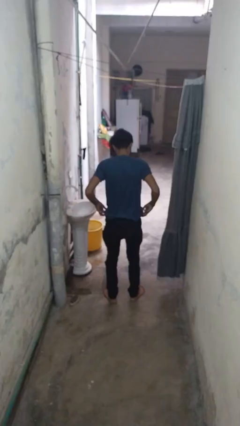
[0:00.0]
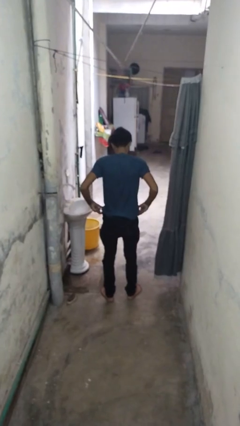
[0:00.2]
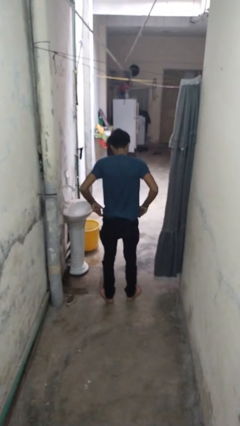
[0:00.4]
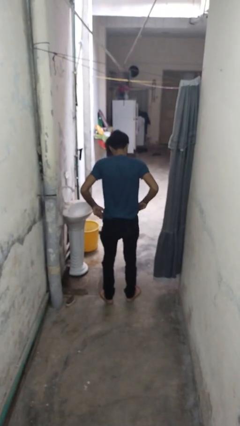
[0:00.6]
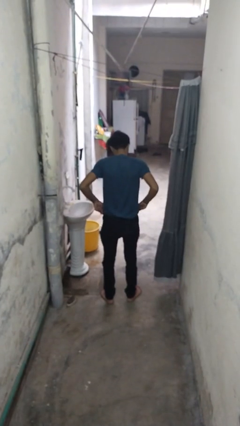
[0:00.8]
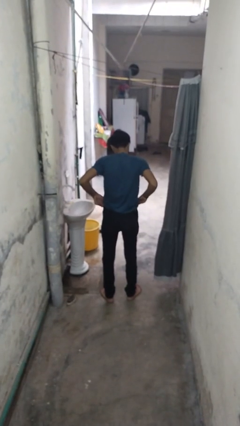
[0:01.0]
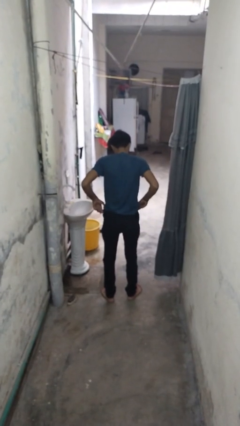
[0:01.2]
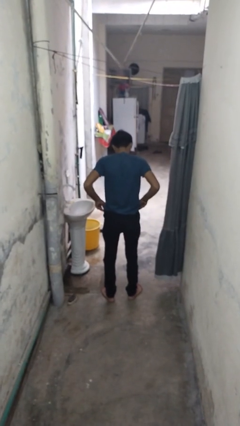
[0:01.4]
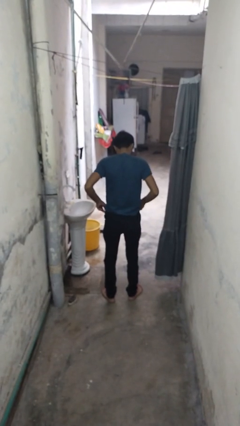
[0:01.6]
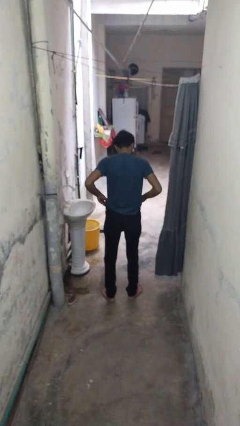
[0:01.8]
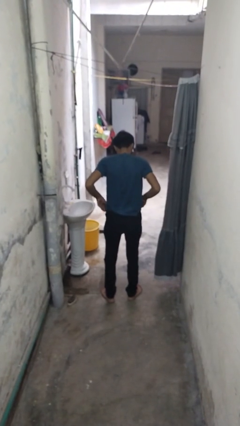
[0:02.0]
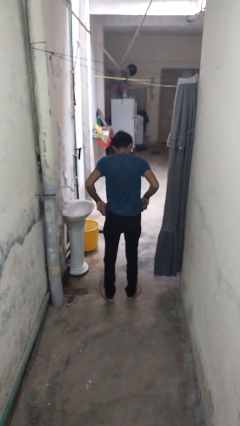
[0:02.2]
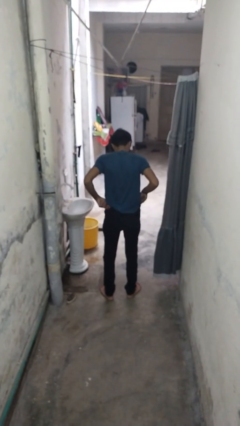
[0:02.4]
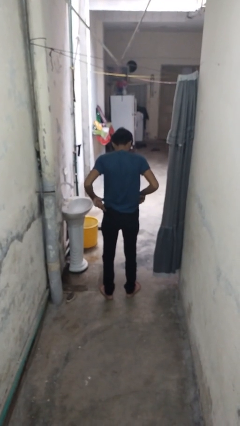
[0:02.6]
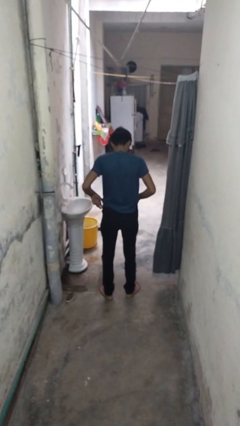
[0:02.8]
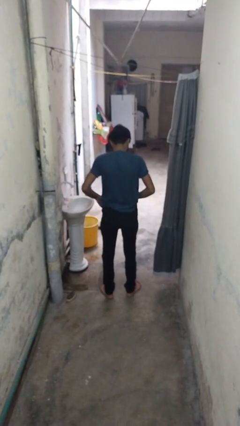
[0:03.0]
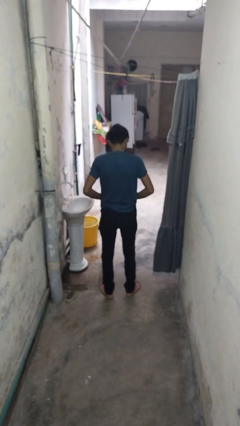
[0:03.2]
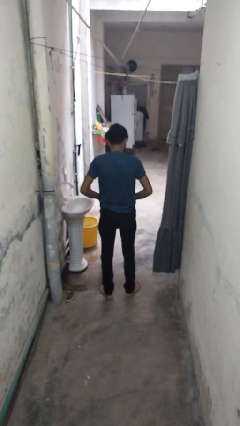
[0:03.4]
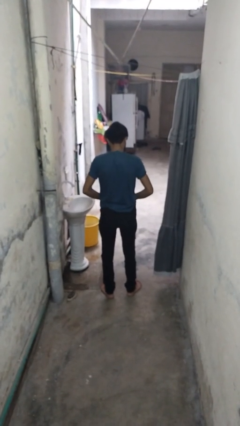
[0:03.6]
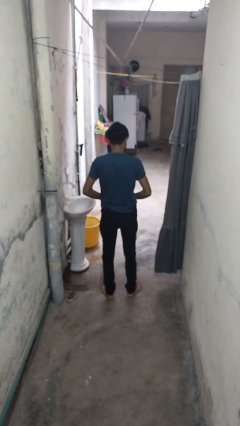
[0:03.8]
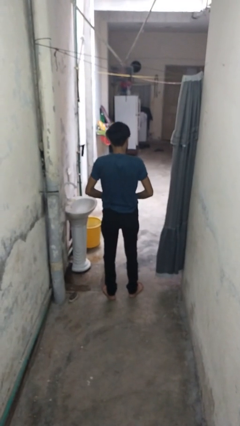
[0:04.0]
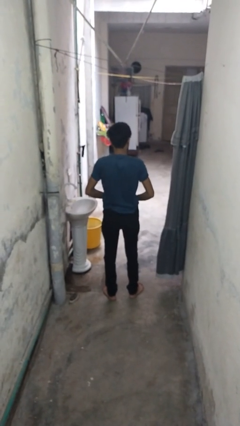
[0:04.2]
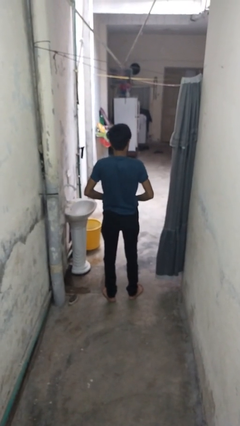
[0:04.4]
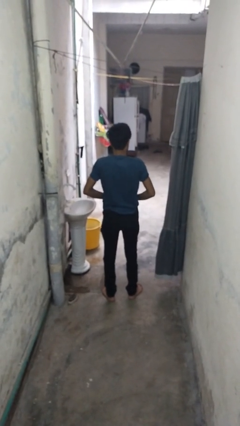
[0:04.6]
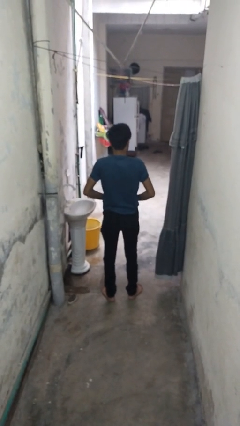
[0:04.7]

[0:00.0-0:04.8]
person hikes up pants

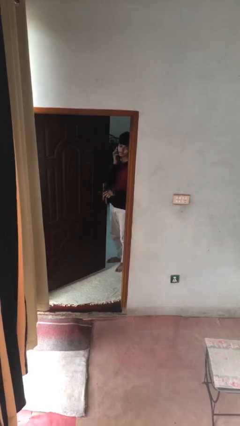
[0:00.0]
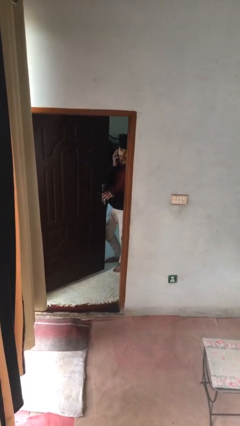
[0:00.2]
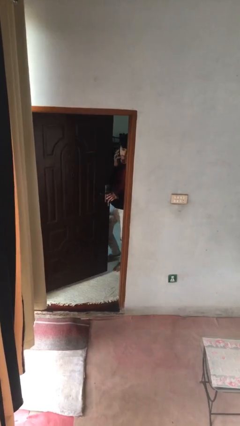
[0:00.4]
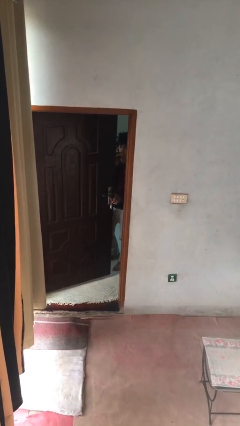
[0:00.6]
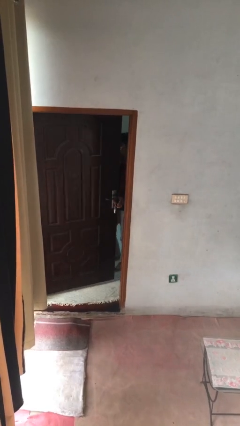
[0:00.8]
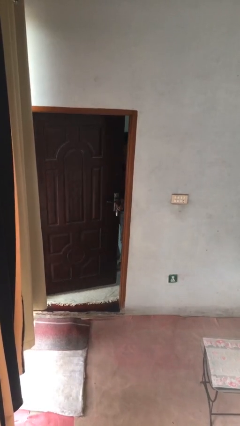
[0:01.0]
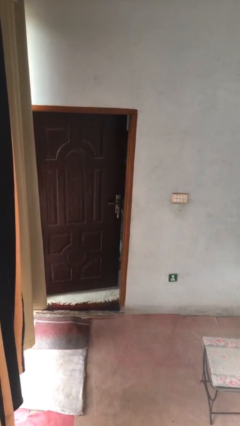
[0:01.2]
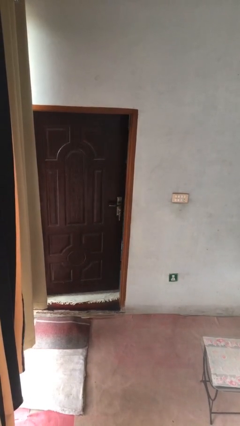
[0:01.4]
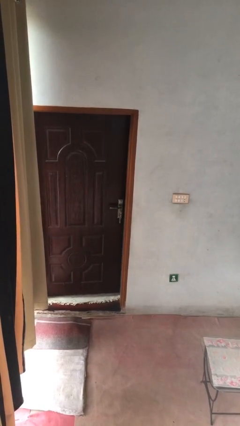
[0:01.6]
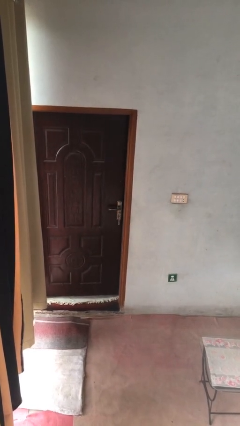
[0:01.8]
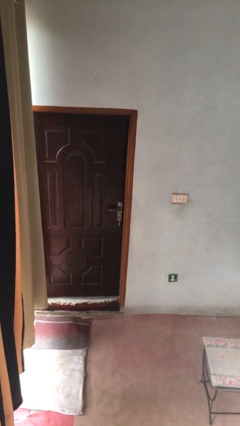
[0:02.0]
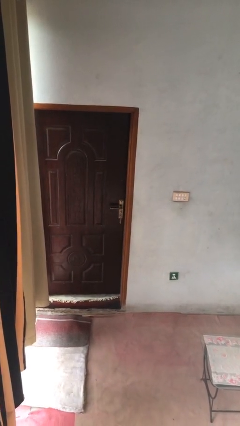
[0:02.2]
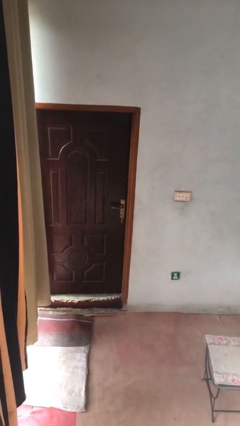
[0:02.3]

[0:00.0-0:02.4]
person closes facility door

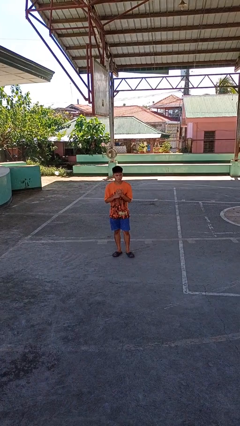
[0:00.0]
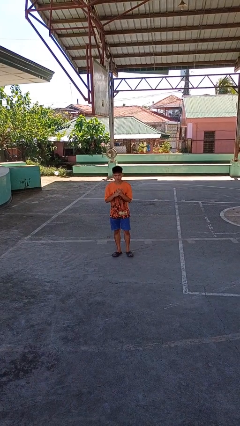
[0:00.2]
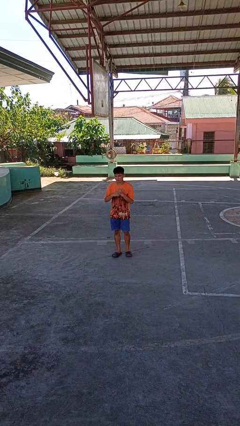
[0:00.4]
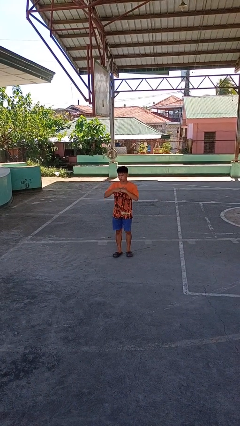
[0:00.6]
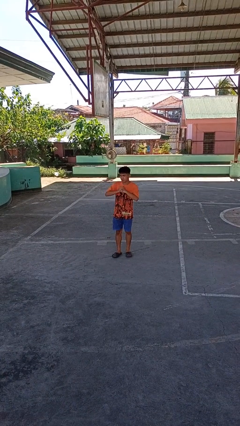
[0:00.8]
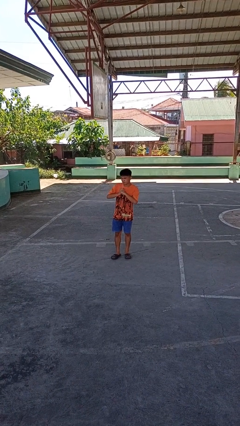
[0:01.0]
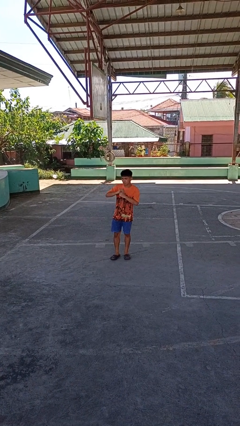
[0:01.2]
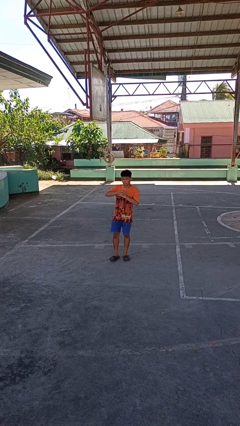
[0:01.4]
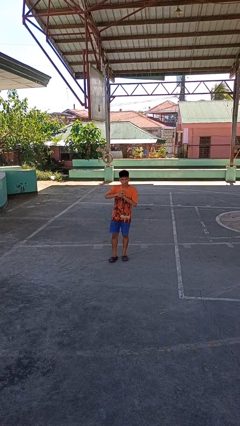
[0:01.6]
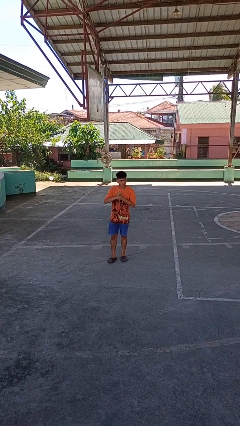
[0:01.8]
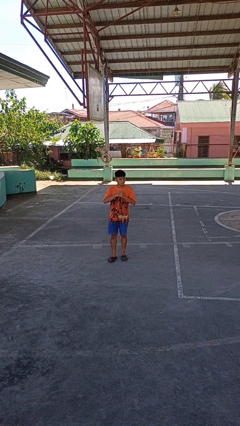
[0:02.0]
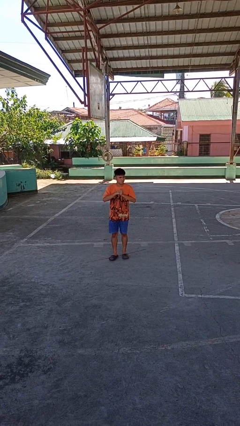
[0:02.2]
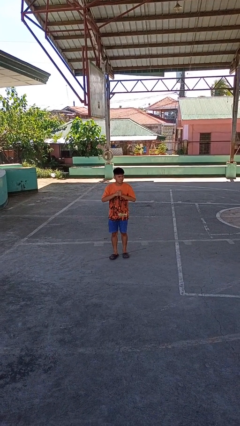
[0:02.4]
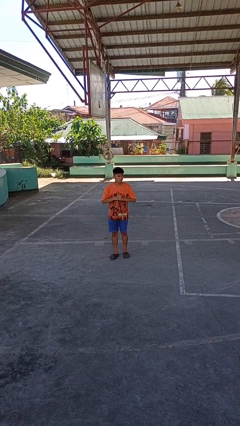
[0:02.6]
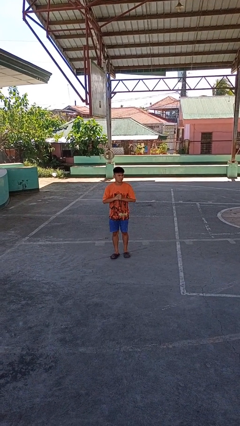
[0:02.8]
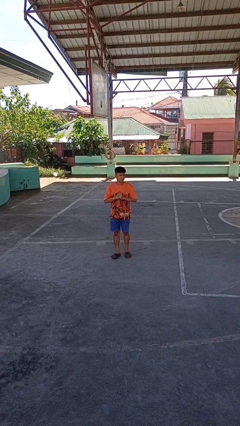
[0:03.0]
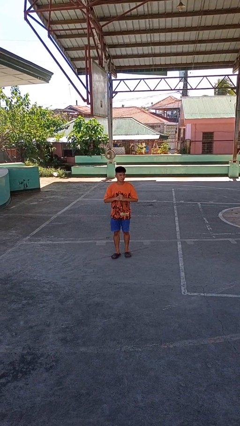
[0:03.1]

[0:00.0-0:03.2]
person cracks knuckles

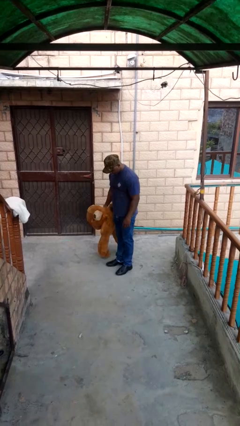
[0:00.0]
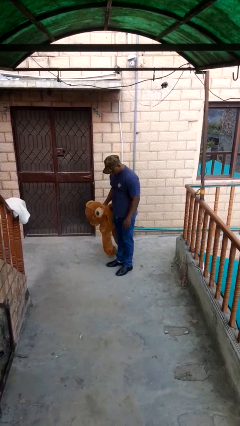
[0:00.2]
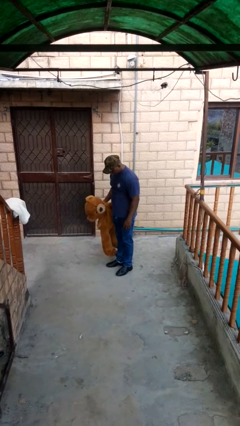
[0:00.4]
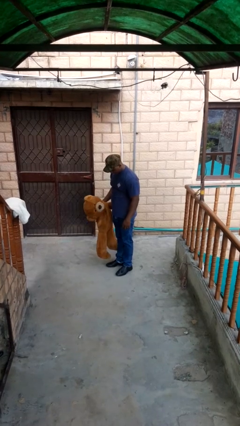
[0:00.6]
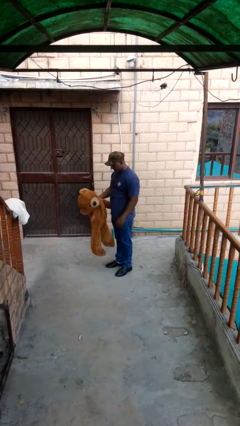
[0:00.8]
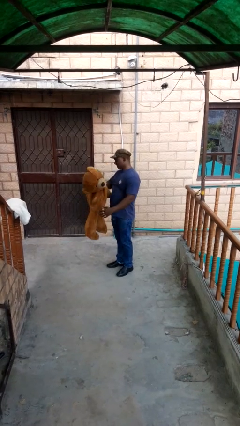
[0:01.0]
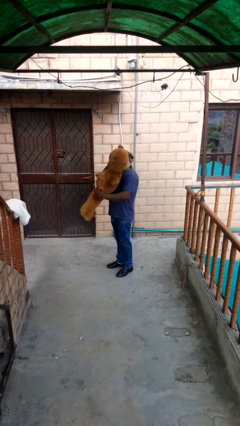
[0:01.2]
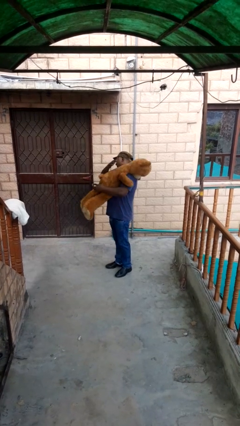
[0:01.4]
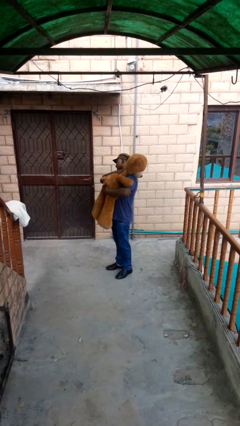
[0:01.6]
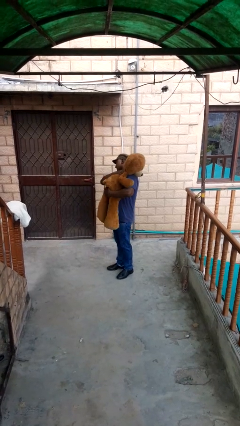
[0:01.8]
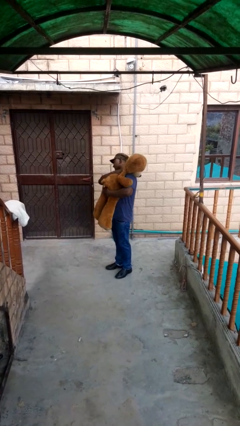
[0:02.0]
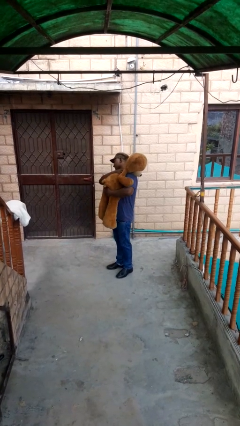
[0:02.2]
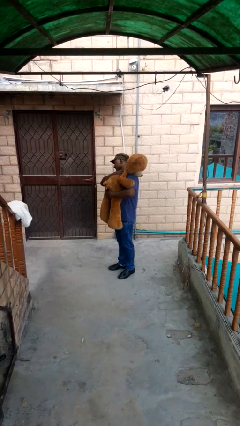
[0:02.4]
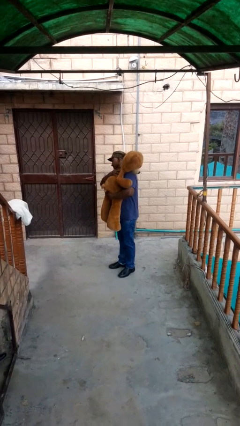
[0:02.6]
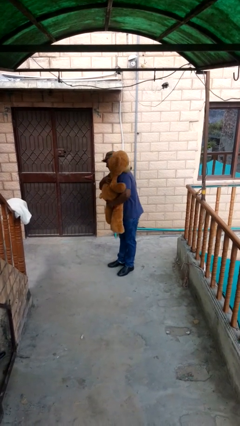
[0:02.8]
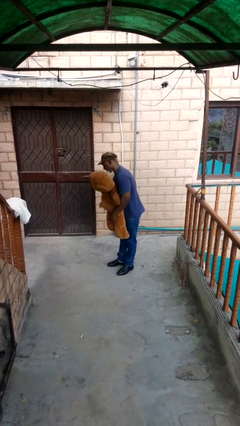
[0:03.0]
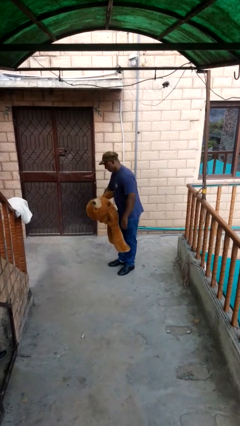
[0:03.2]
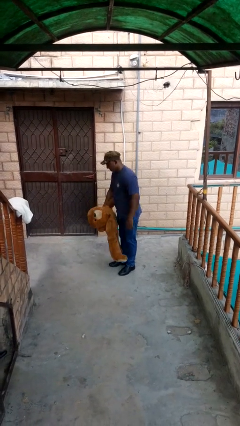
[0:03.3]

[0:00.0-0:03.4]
person hugs stuffed animal

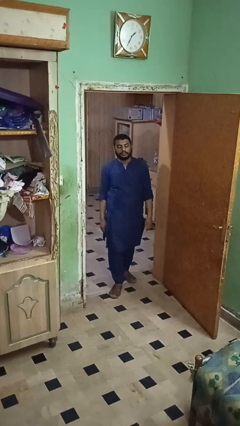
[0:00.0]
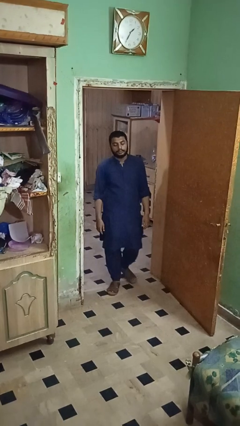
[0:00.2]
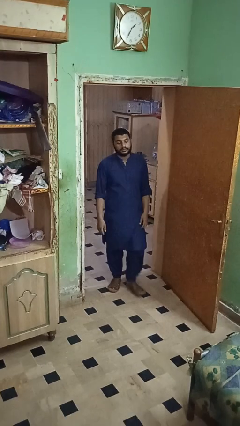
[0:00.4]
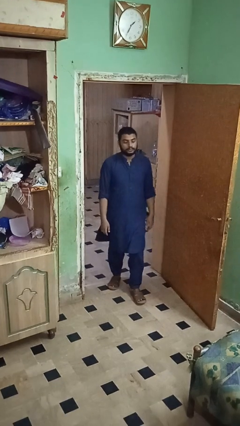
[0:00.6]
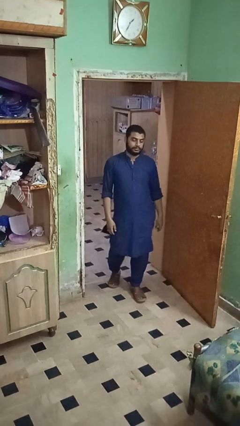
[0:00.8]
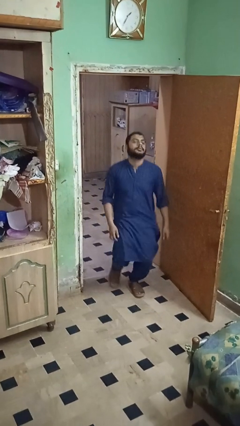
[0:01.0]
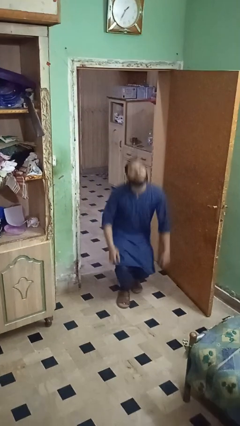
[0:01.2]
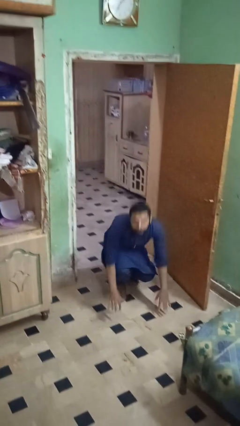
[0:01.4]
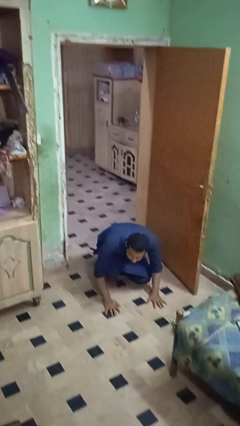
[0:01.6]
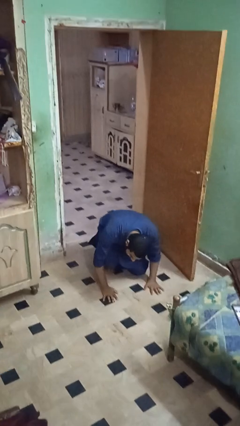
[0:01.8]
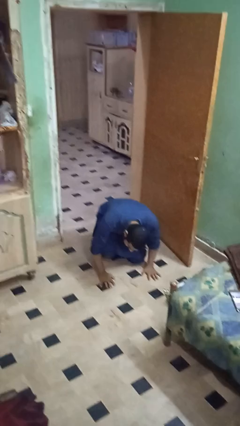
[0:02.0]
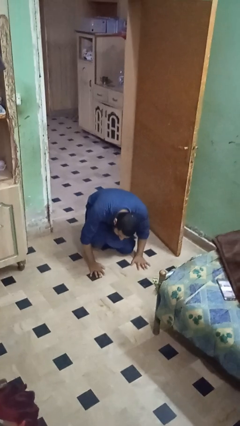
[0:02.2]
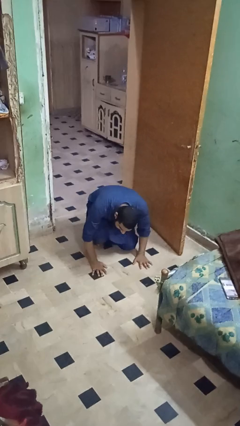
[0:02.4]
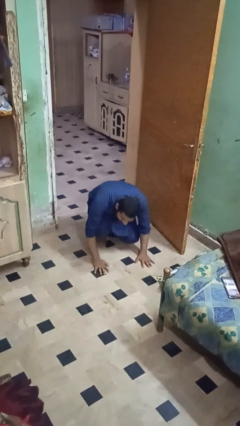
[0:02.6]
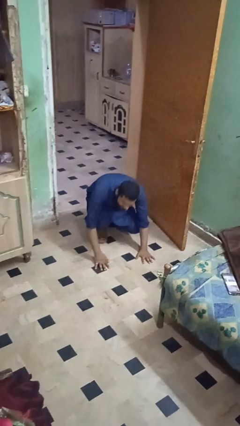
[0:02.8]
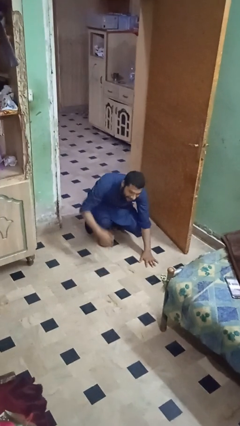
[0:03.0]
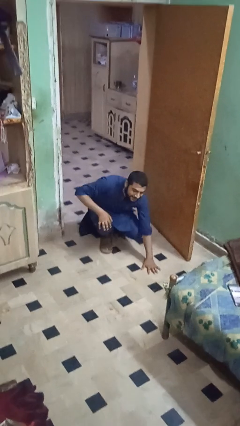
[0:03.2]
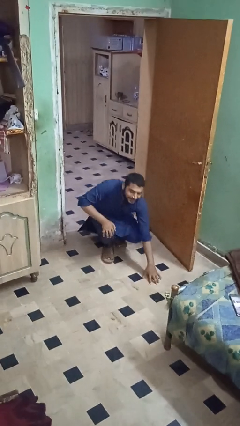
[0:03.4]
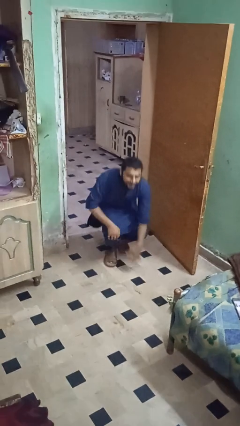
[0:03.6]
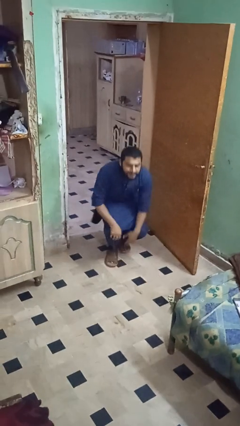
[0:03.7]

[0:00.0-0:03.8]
person trips on object on floor
